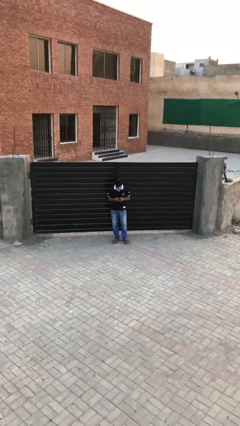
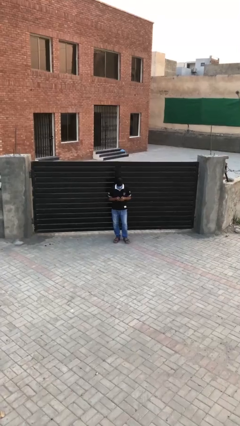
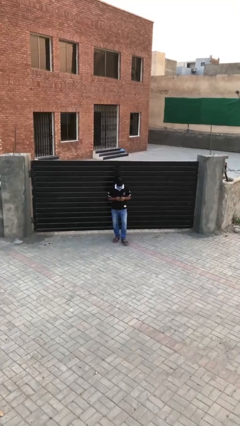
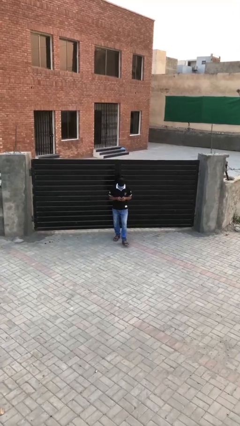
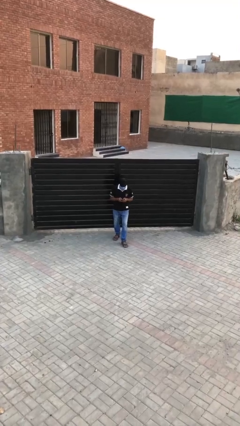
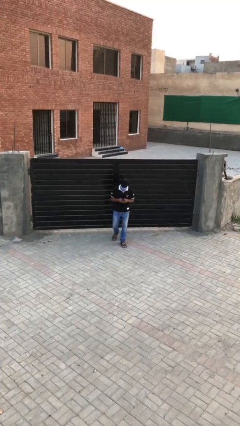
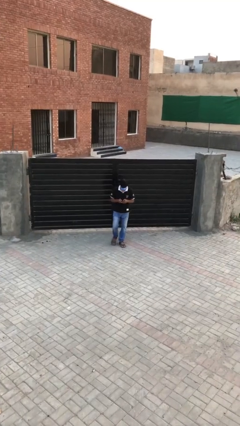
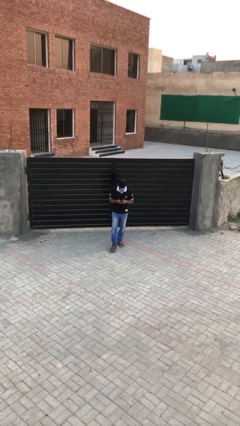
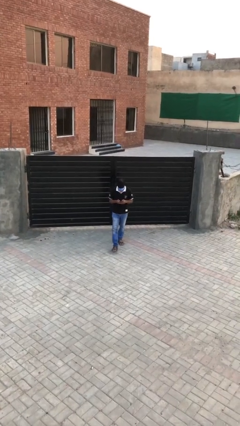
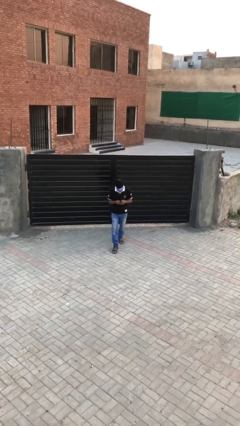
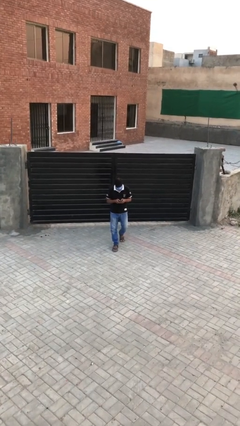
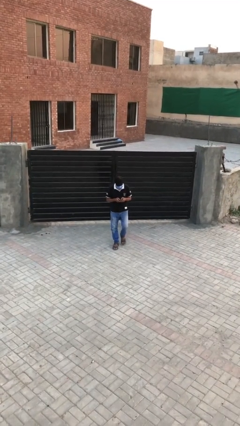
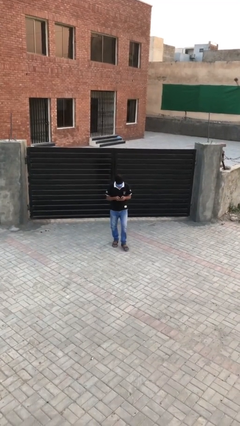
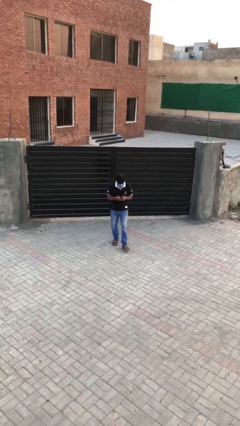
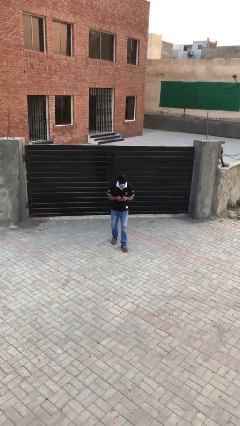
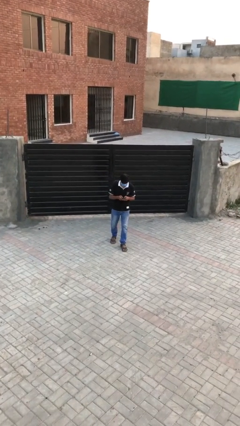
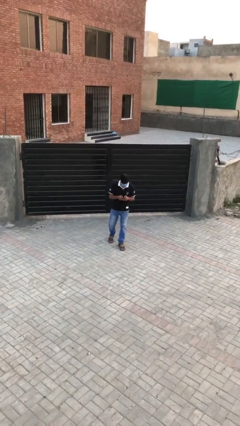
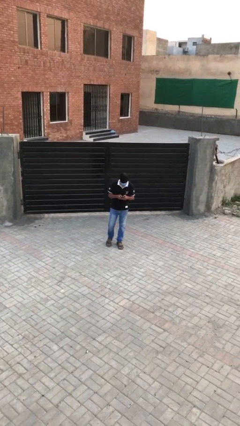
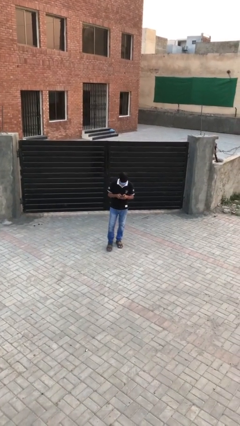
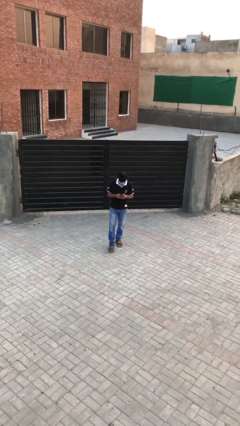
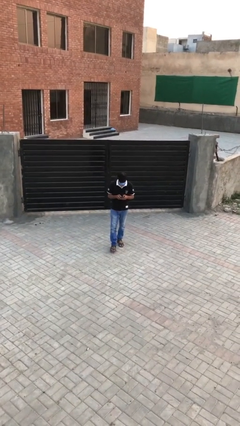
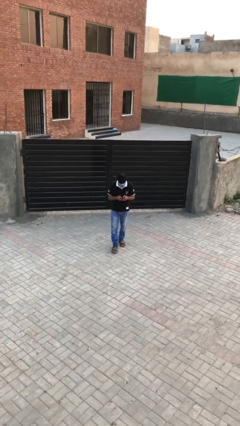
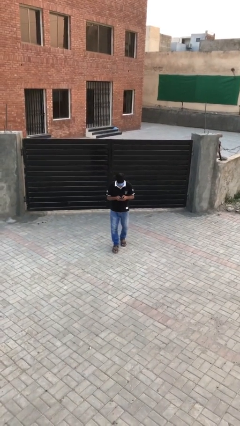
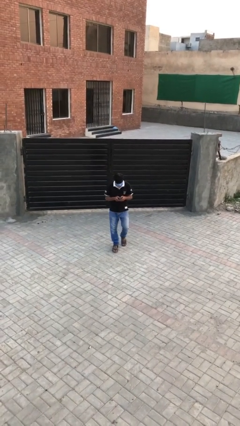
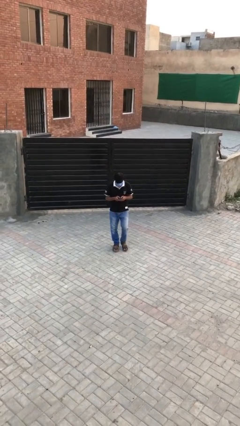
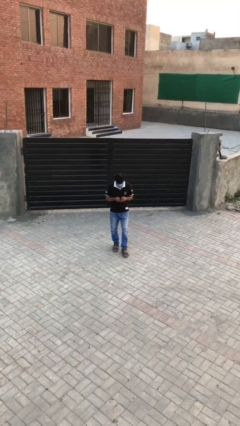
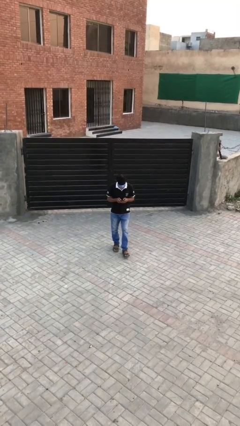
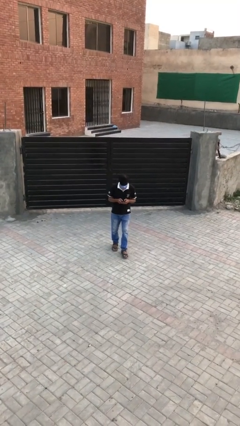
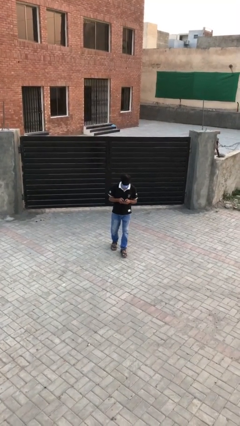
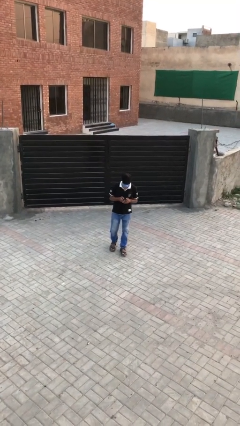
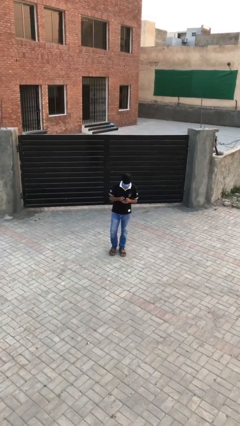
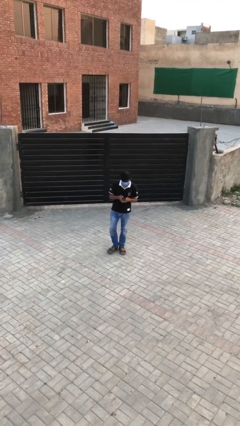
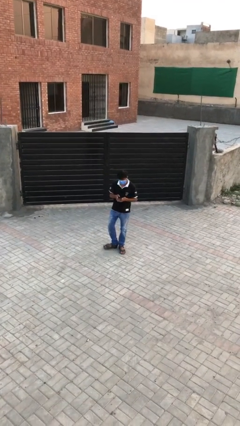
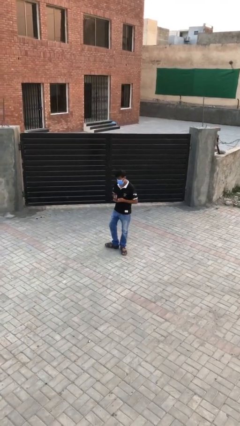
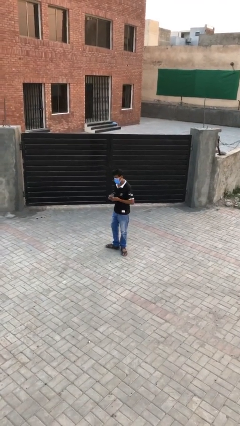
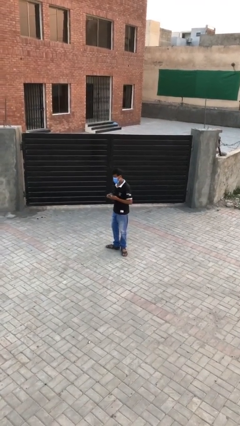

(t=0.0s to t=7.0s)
person texts on phone

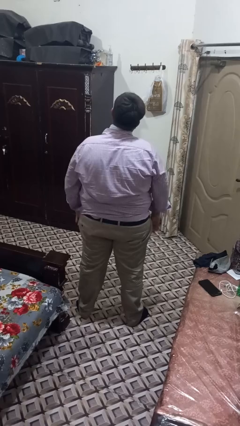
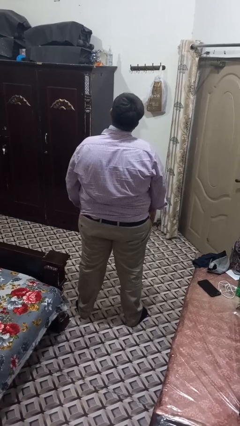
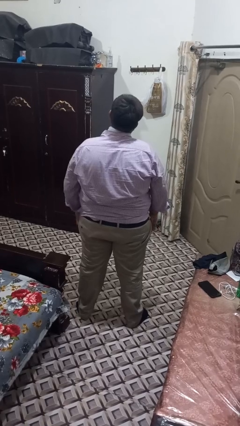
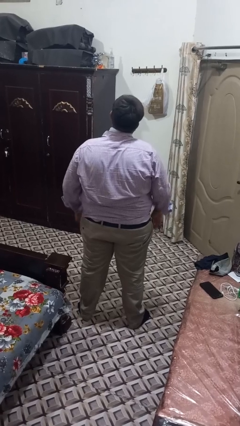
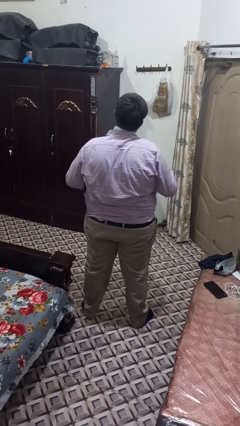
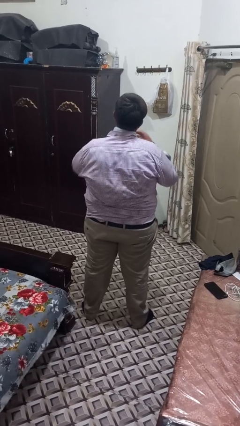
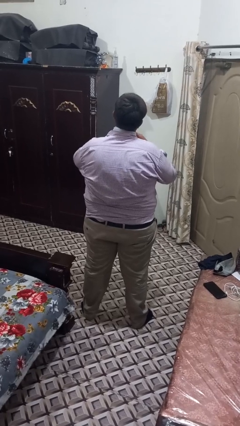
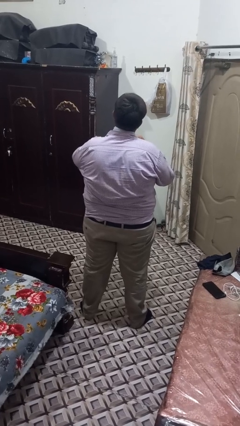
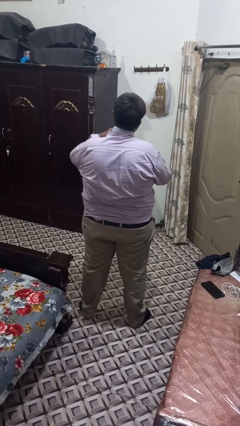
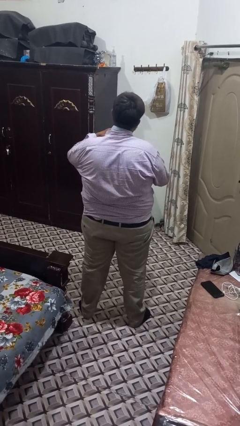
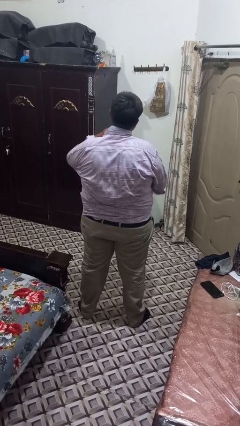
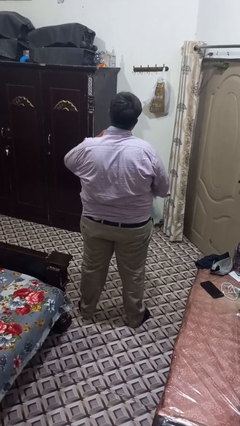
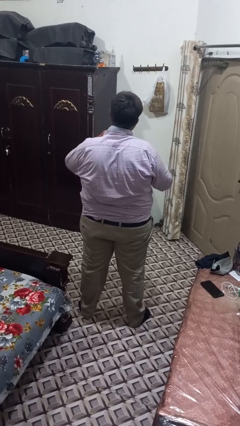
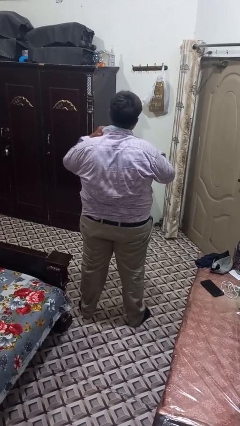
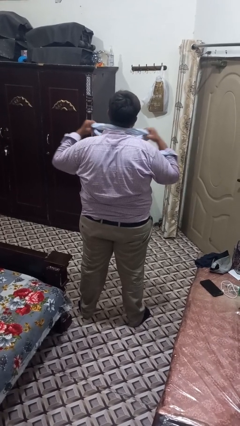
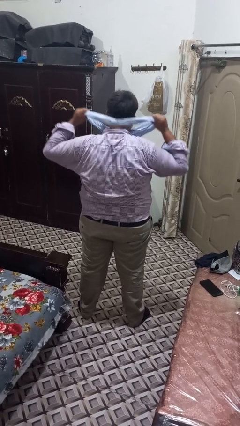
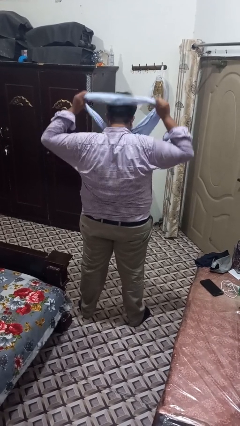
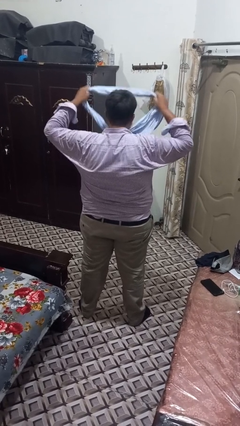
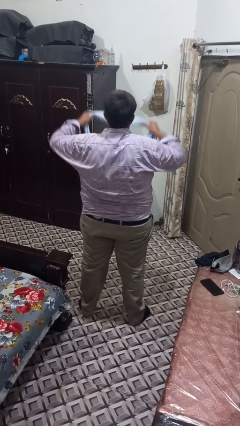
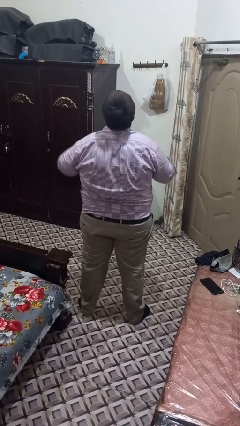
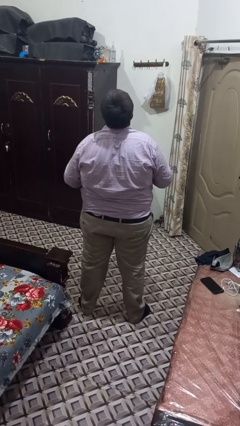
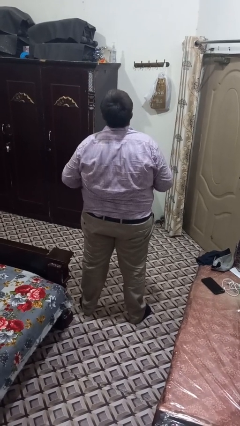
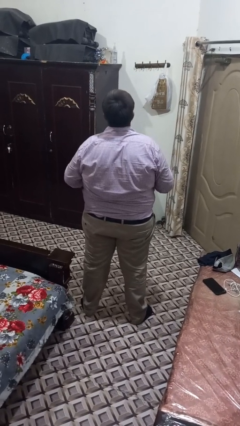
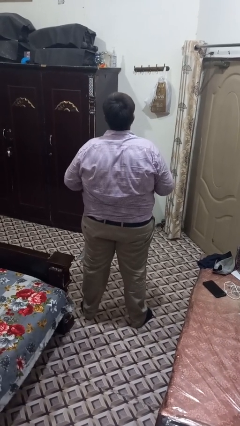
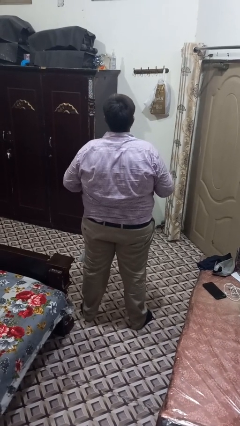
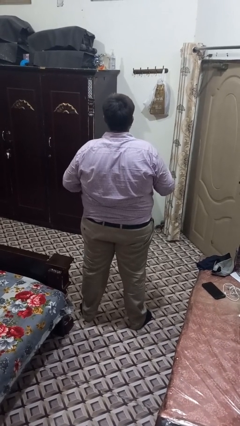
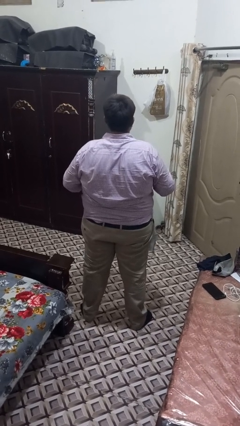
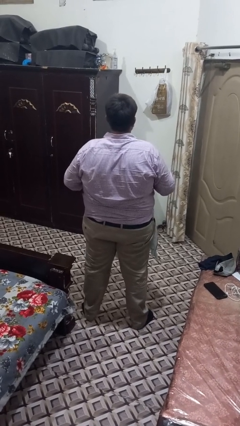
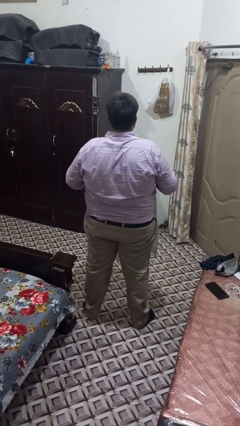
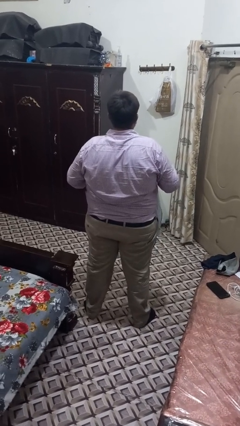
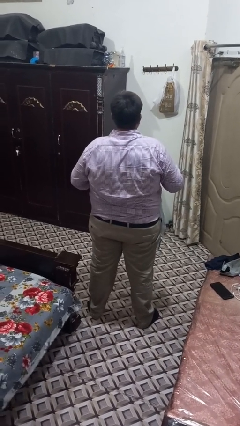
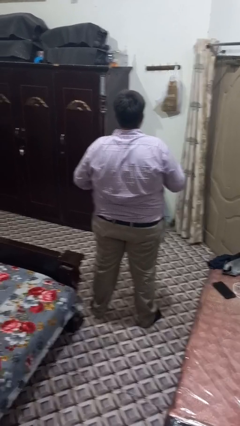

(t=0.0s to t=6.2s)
person takes off scarf

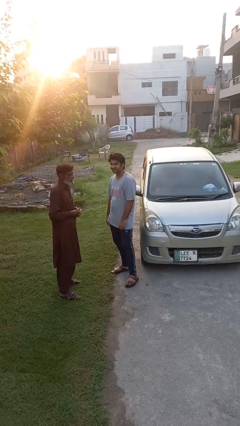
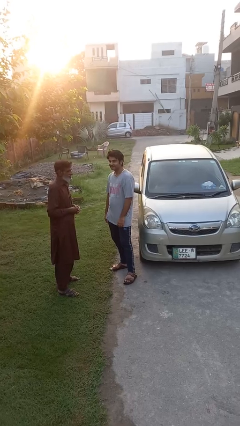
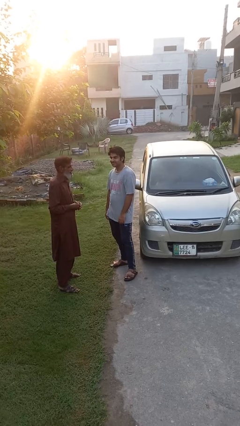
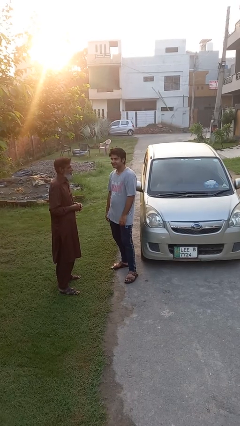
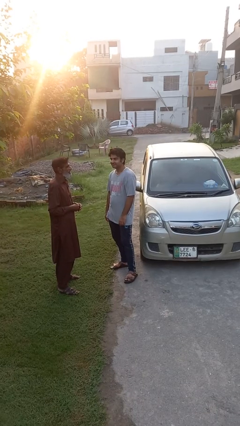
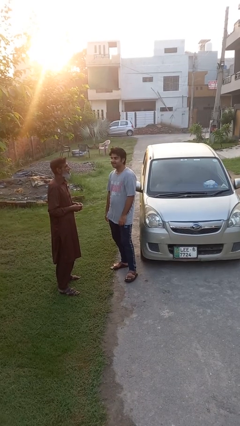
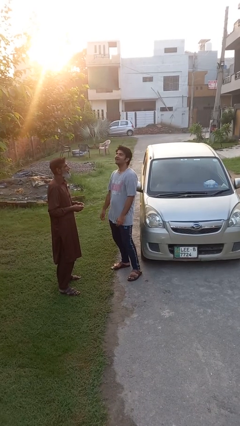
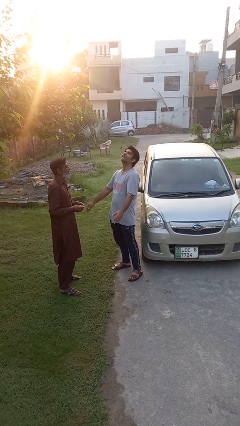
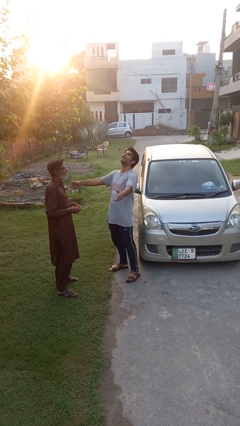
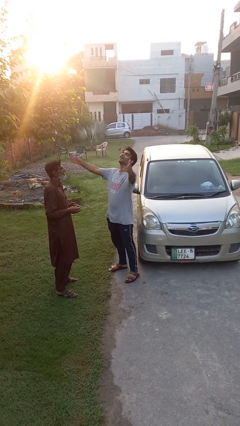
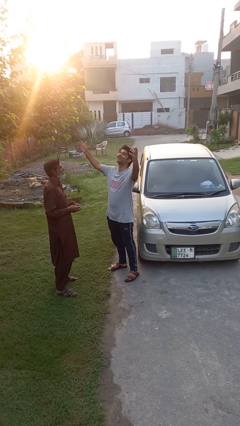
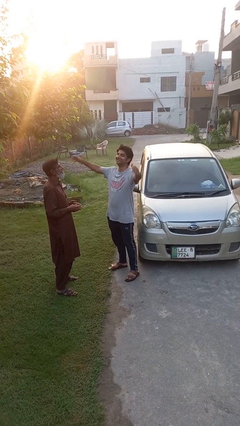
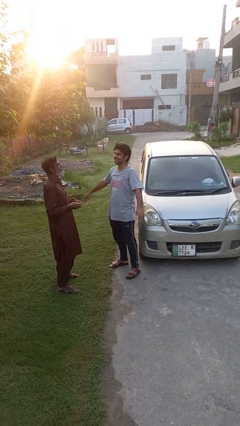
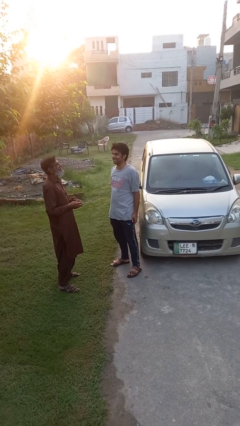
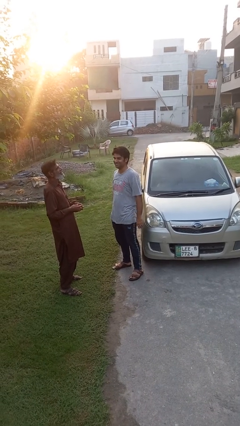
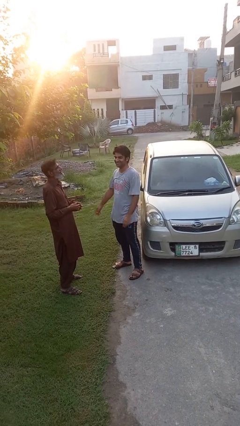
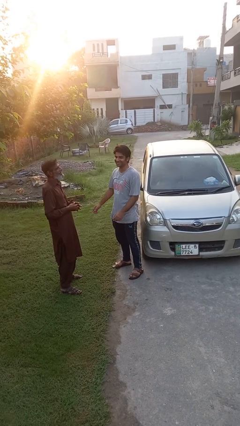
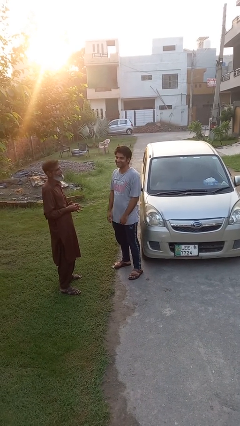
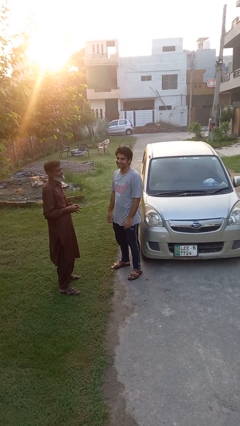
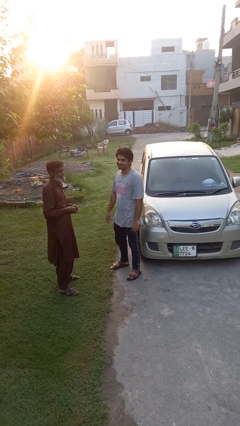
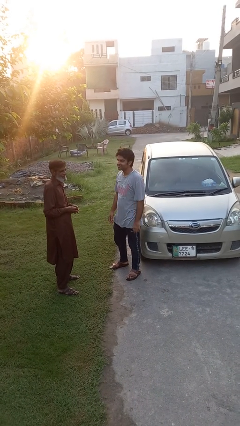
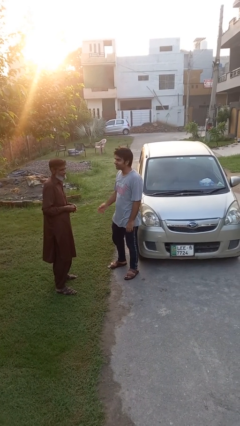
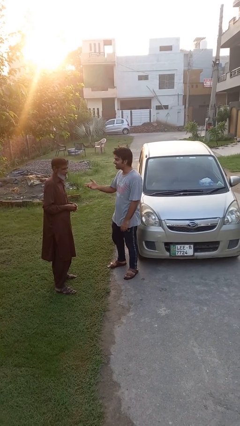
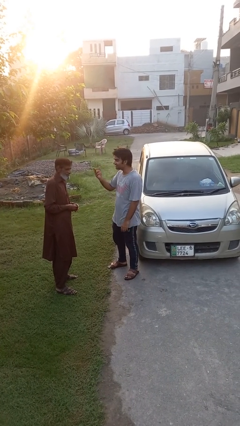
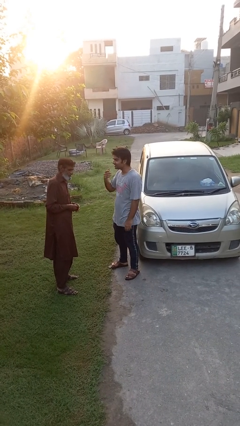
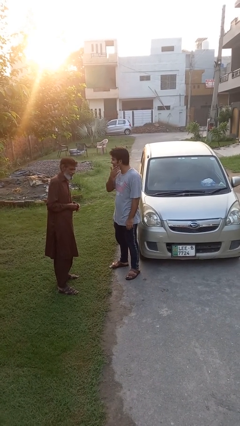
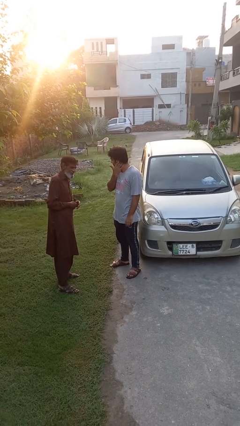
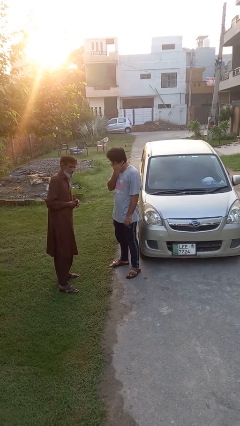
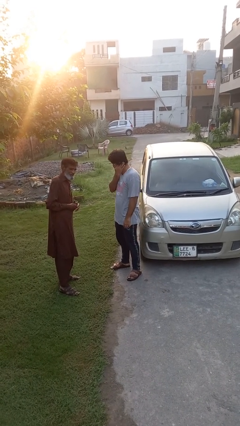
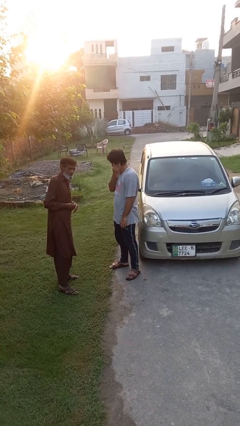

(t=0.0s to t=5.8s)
person laughs with person
